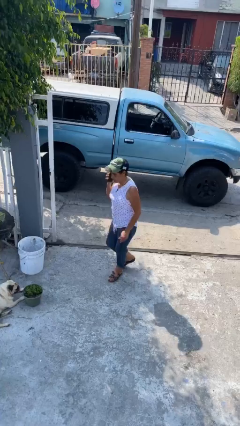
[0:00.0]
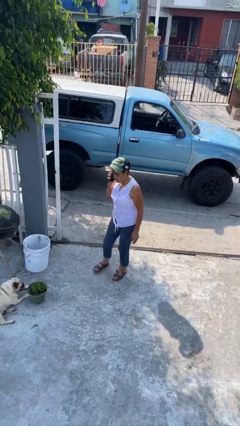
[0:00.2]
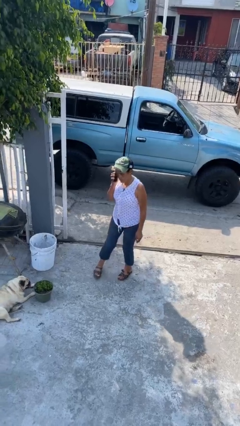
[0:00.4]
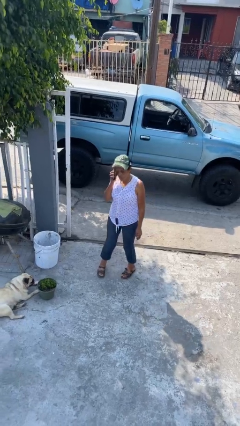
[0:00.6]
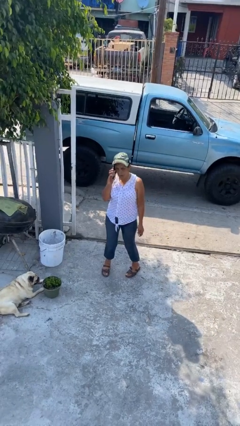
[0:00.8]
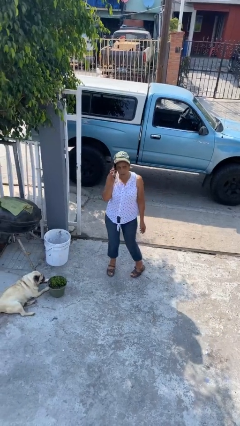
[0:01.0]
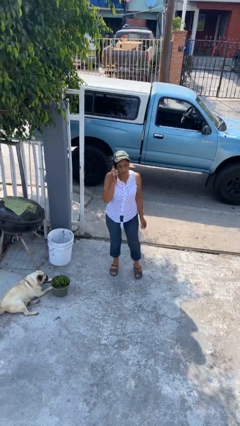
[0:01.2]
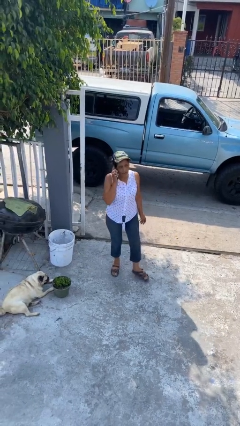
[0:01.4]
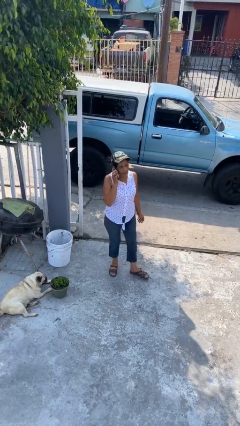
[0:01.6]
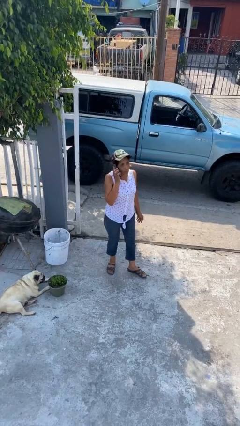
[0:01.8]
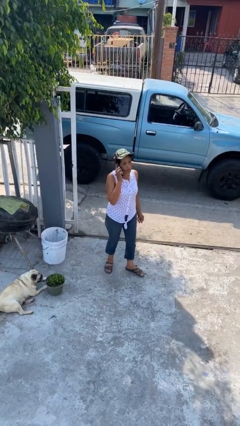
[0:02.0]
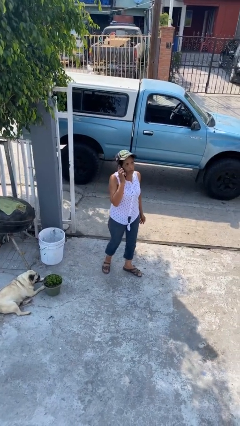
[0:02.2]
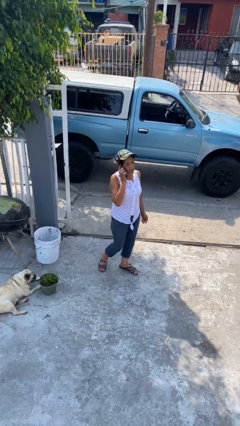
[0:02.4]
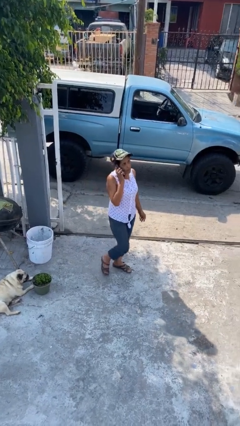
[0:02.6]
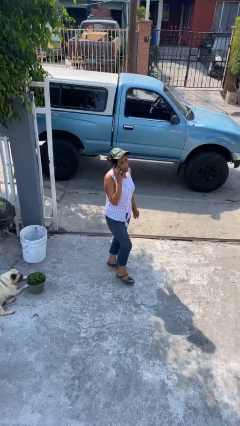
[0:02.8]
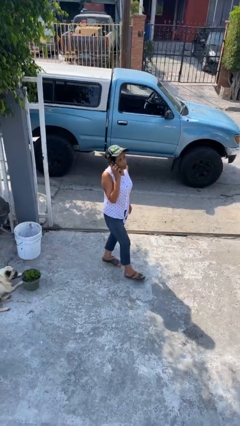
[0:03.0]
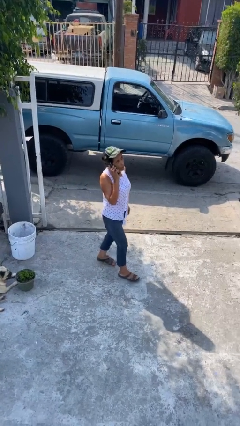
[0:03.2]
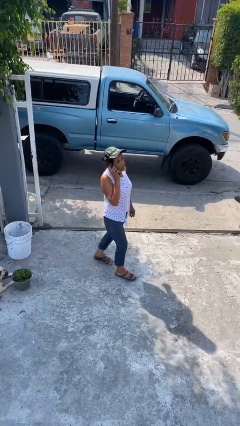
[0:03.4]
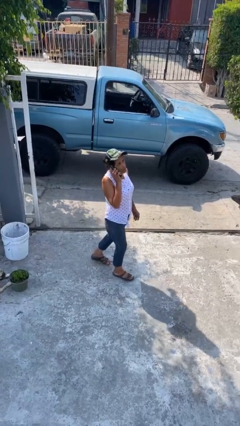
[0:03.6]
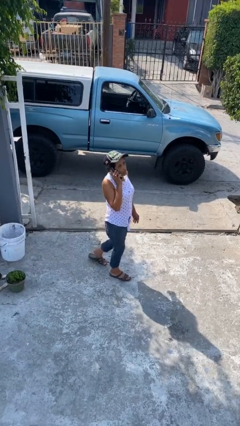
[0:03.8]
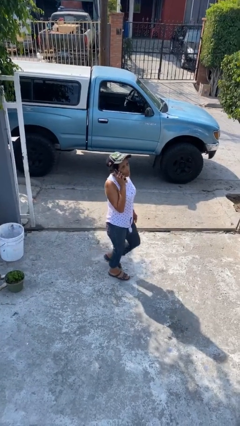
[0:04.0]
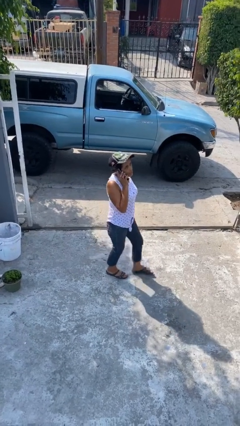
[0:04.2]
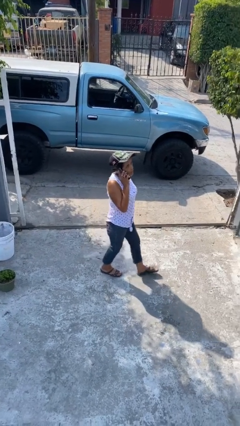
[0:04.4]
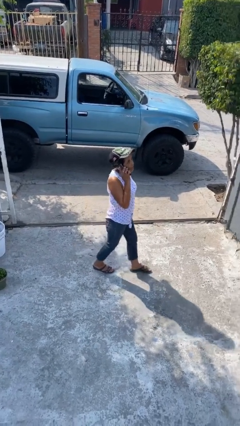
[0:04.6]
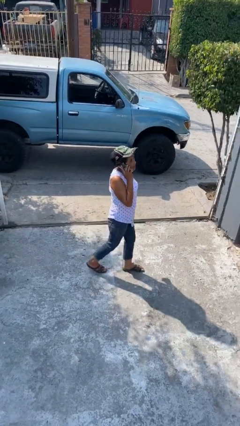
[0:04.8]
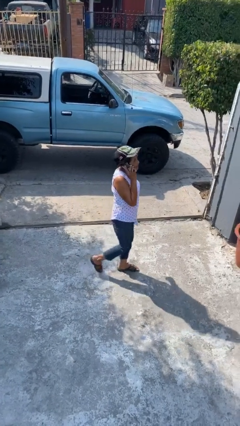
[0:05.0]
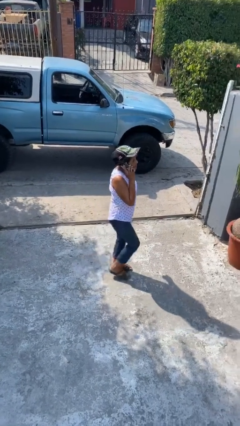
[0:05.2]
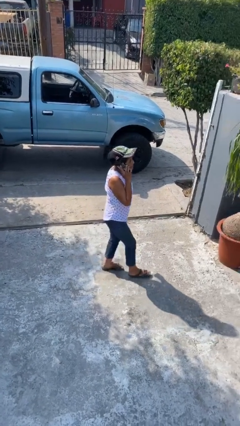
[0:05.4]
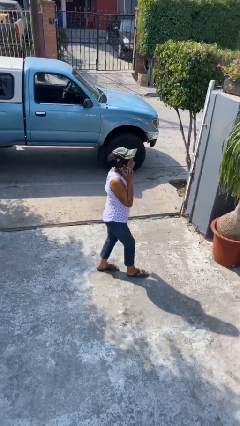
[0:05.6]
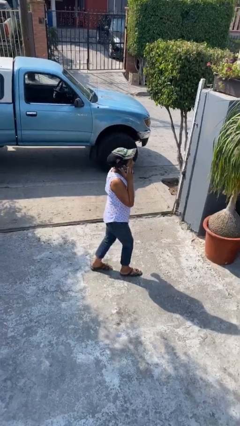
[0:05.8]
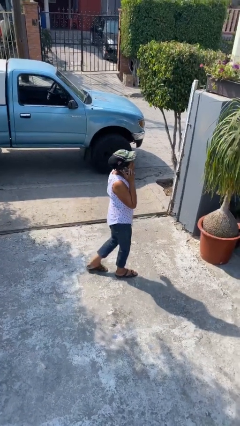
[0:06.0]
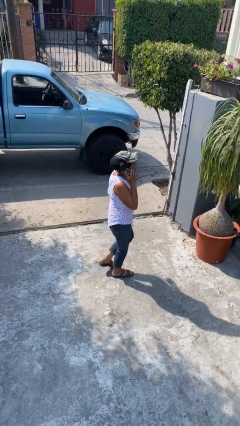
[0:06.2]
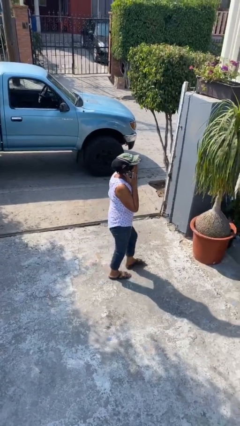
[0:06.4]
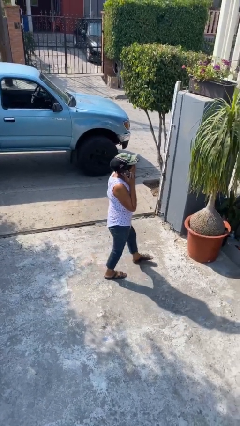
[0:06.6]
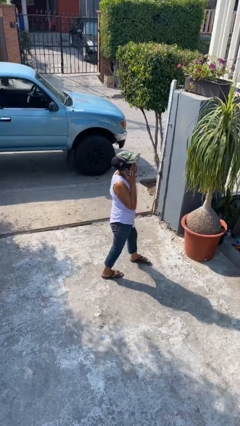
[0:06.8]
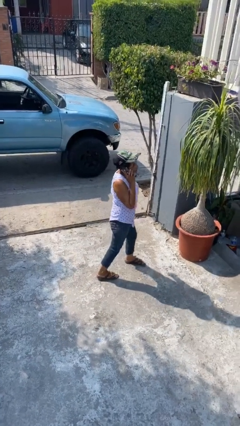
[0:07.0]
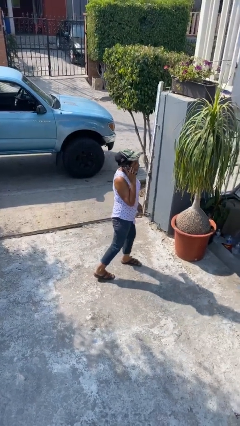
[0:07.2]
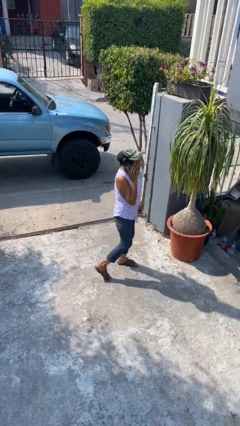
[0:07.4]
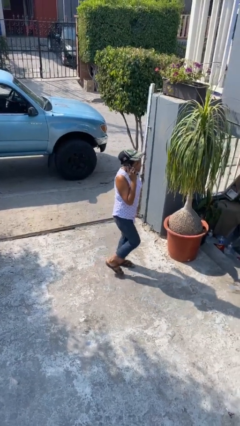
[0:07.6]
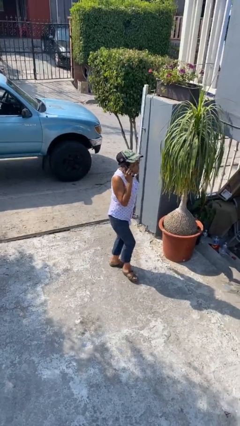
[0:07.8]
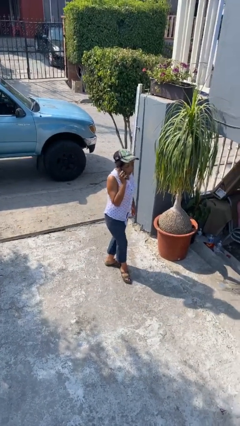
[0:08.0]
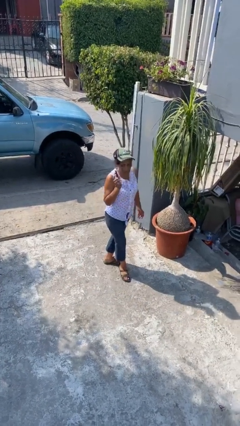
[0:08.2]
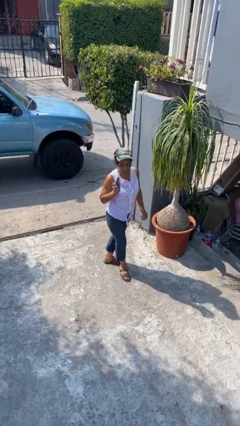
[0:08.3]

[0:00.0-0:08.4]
person talks on phone

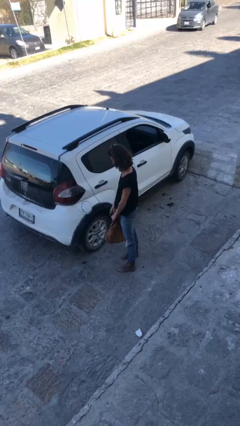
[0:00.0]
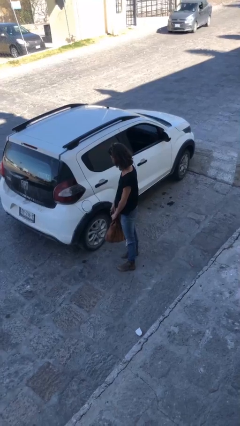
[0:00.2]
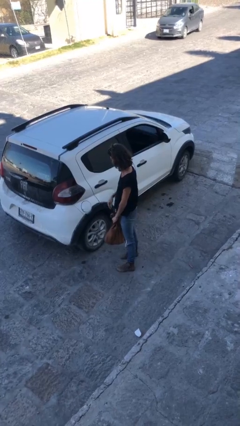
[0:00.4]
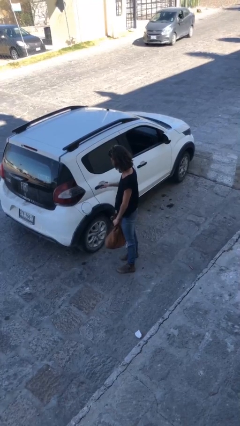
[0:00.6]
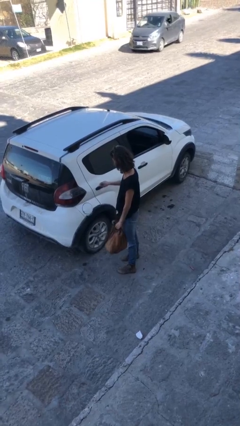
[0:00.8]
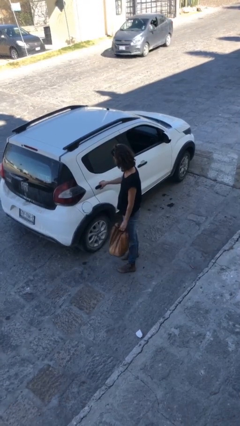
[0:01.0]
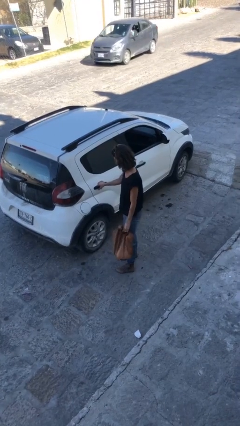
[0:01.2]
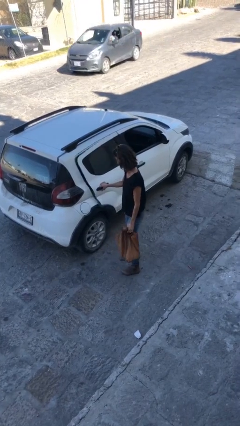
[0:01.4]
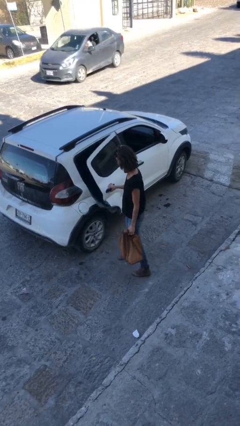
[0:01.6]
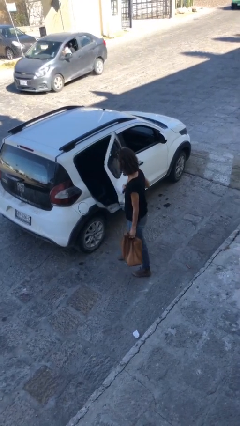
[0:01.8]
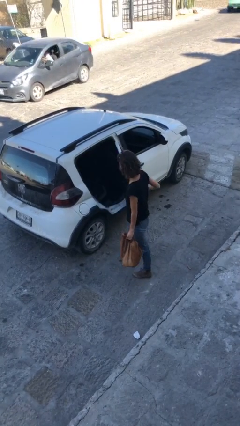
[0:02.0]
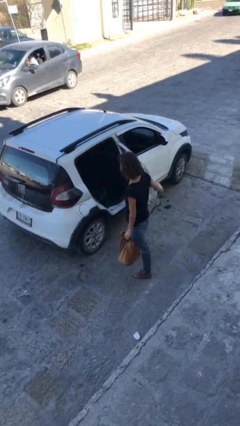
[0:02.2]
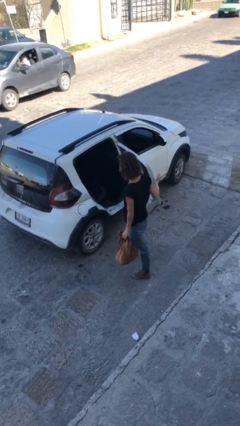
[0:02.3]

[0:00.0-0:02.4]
person opens car door

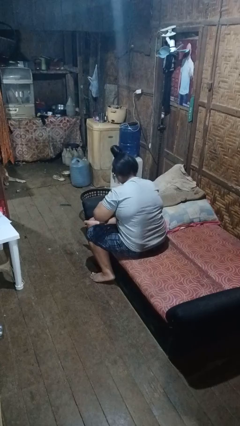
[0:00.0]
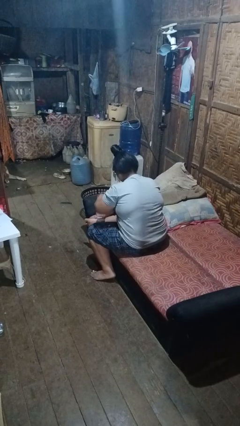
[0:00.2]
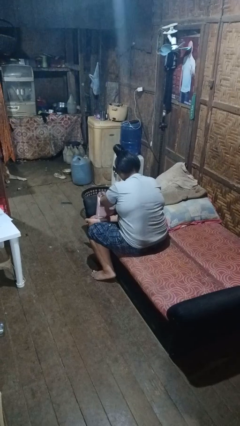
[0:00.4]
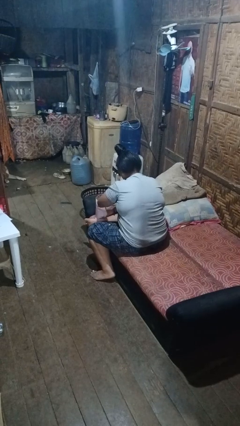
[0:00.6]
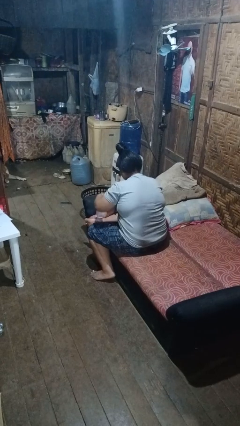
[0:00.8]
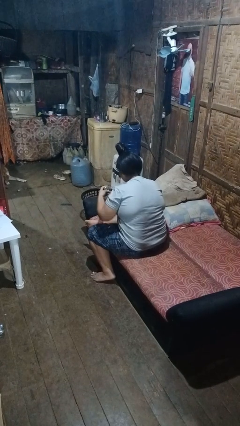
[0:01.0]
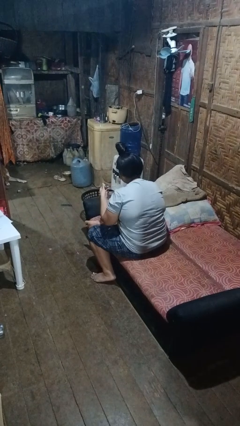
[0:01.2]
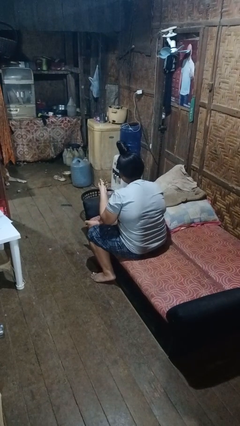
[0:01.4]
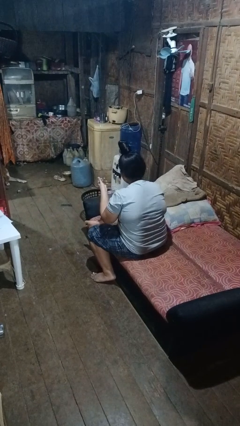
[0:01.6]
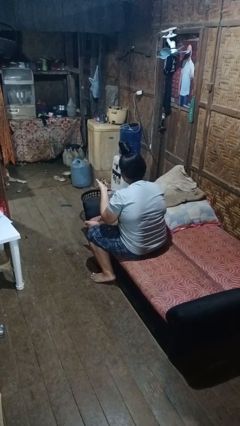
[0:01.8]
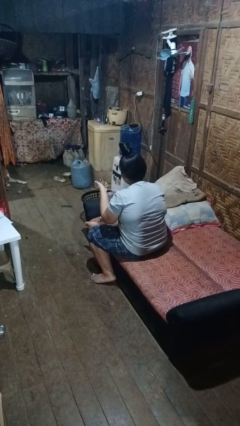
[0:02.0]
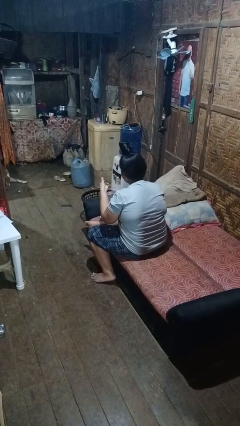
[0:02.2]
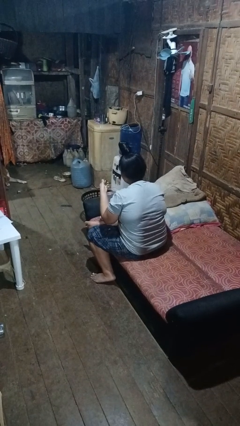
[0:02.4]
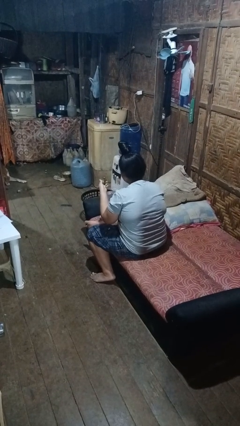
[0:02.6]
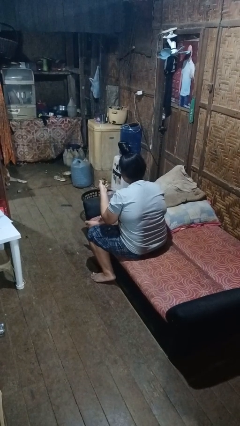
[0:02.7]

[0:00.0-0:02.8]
person takes object from bag

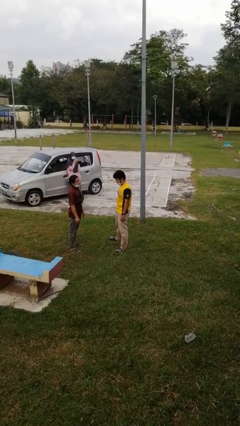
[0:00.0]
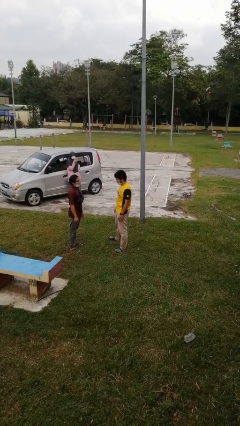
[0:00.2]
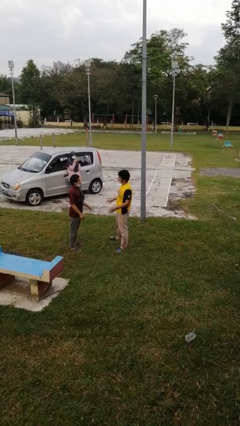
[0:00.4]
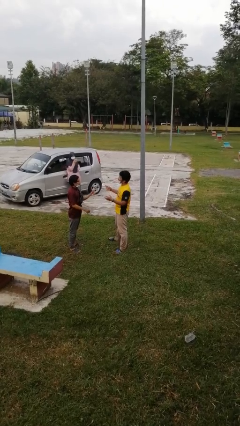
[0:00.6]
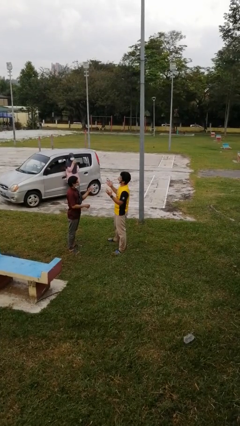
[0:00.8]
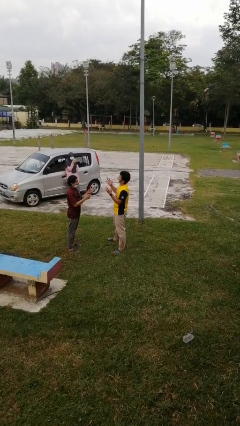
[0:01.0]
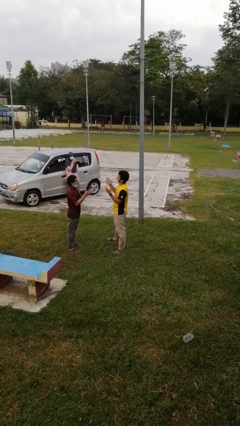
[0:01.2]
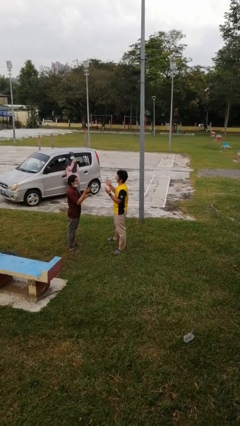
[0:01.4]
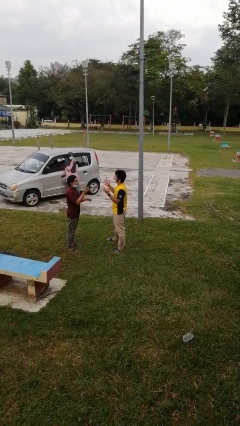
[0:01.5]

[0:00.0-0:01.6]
person talks to person

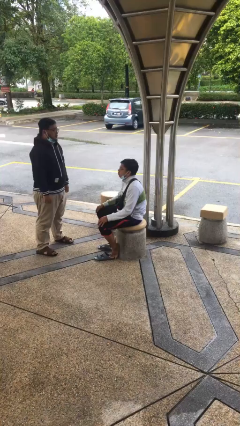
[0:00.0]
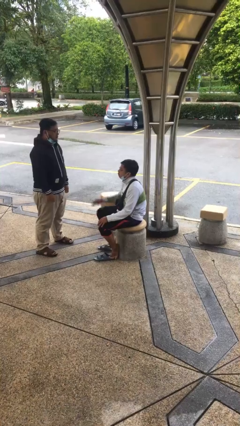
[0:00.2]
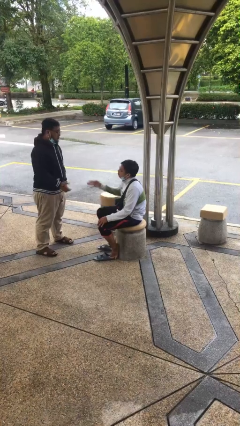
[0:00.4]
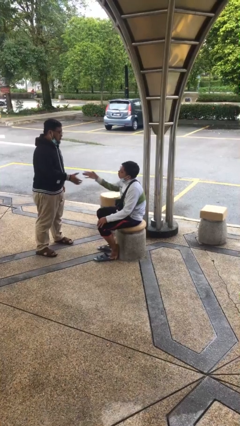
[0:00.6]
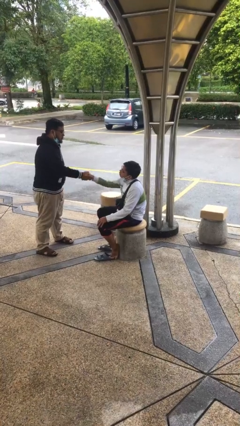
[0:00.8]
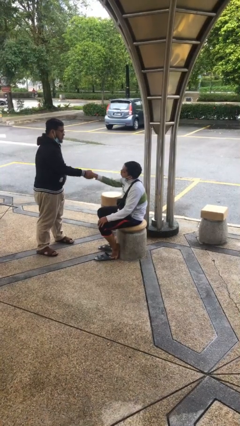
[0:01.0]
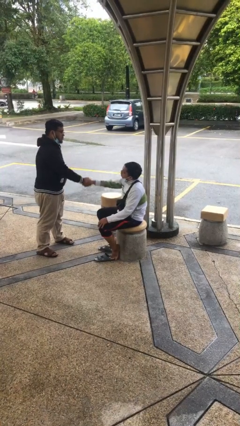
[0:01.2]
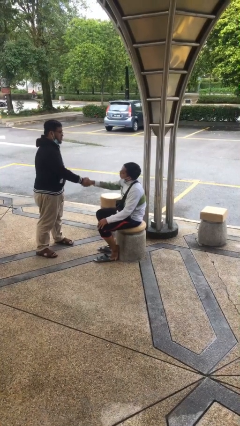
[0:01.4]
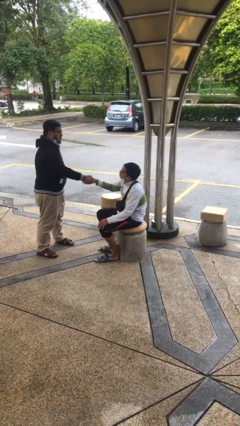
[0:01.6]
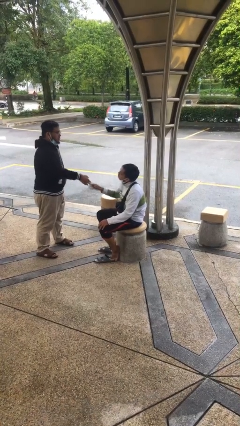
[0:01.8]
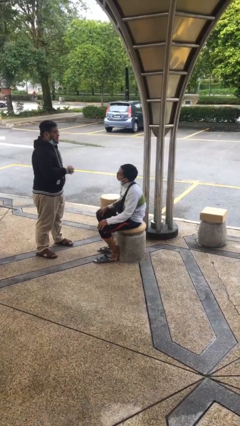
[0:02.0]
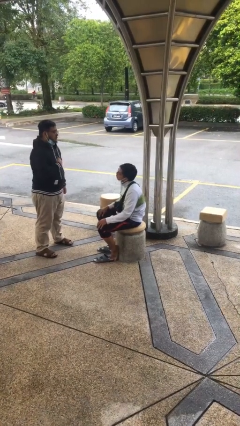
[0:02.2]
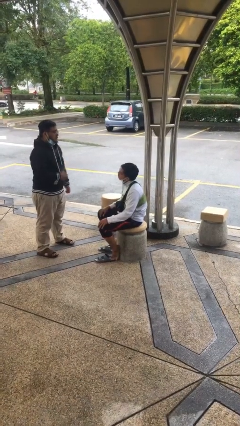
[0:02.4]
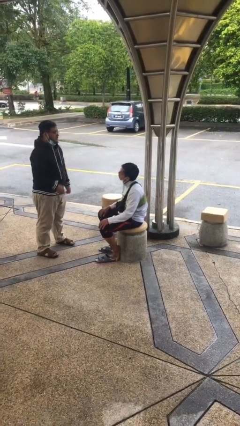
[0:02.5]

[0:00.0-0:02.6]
person shakes hand
